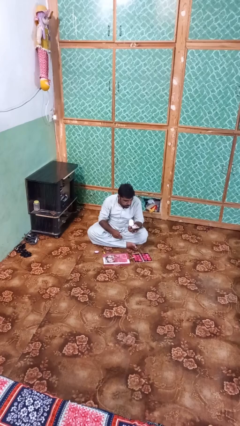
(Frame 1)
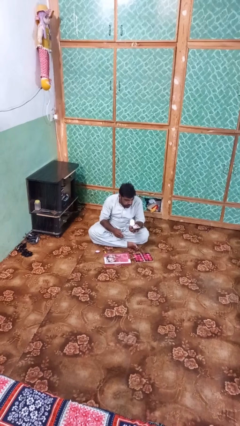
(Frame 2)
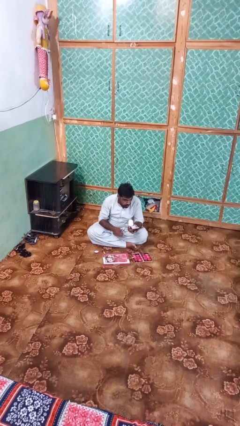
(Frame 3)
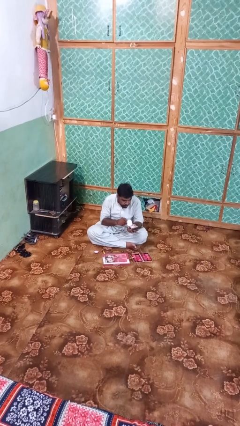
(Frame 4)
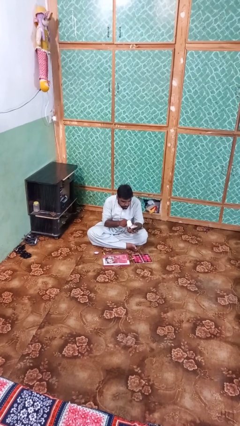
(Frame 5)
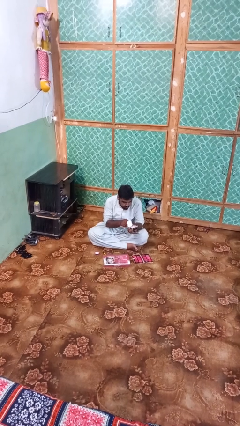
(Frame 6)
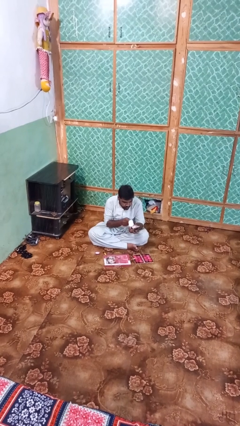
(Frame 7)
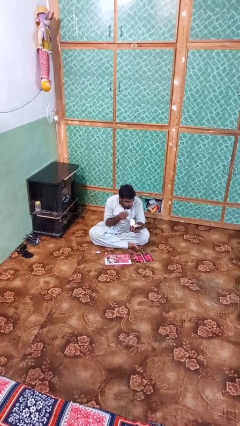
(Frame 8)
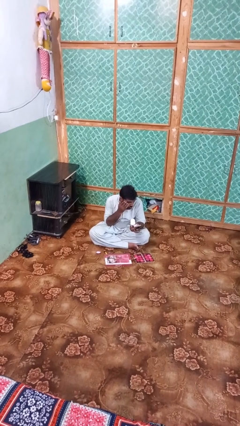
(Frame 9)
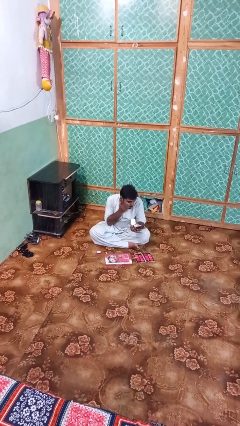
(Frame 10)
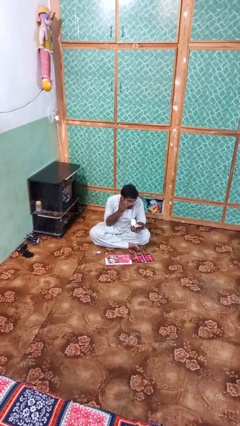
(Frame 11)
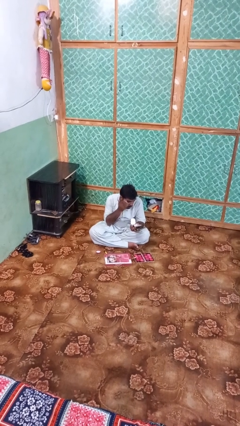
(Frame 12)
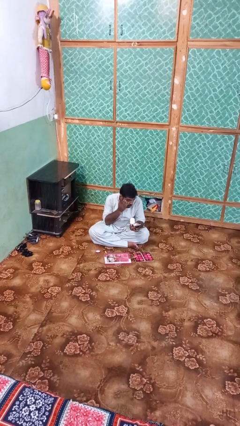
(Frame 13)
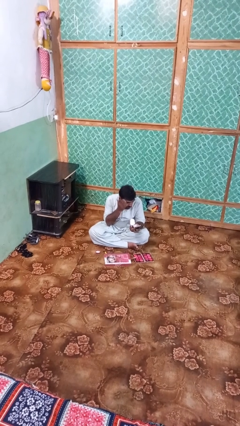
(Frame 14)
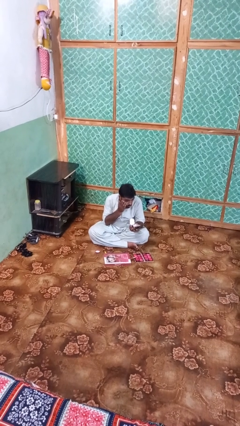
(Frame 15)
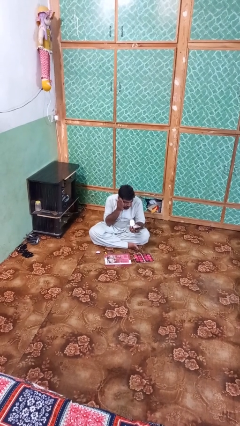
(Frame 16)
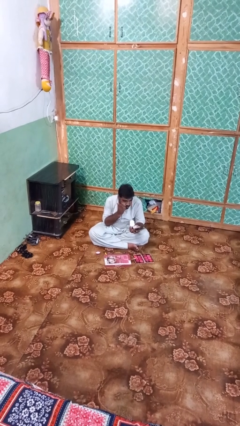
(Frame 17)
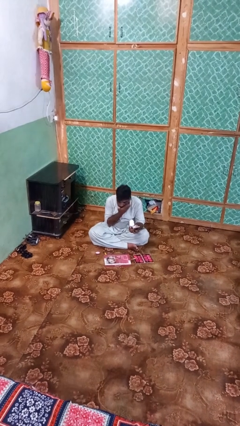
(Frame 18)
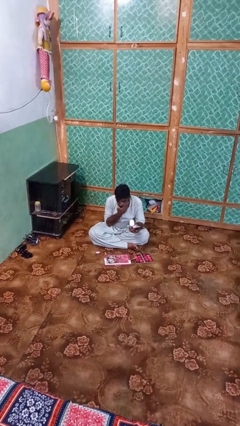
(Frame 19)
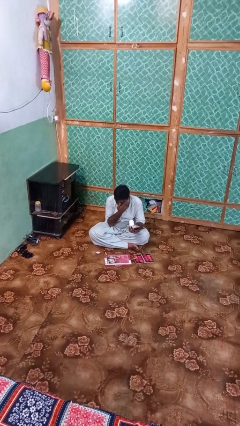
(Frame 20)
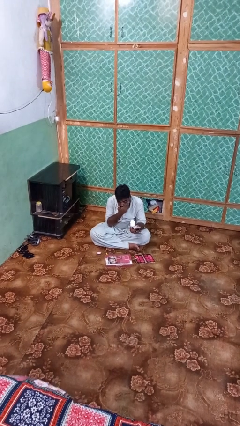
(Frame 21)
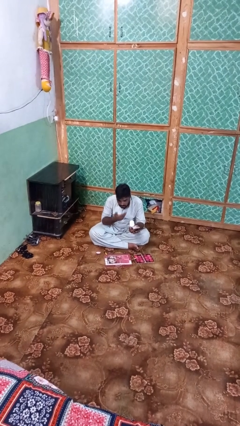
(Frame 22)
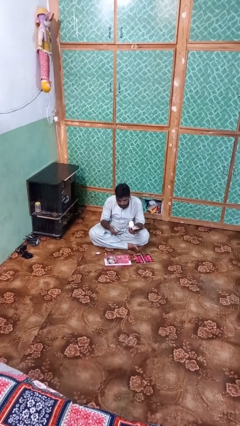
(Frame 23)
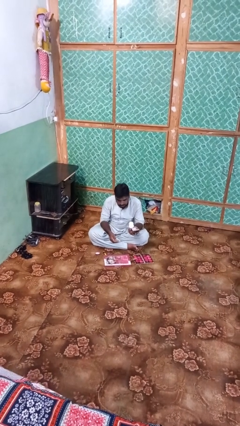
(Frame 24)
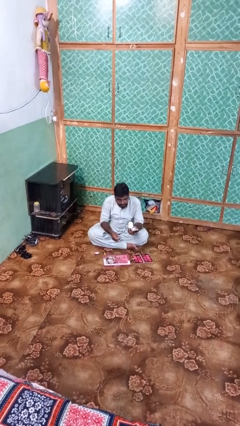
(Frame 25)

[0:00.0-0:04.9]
person applies foundation makeup

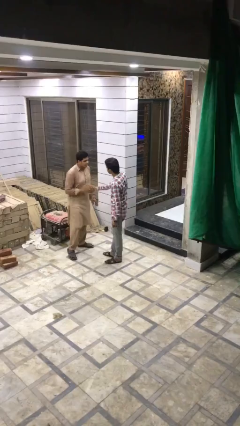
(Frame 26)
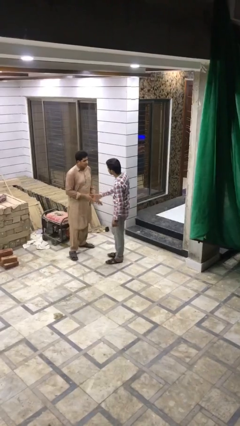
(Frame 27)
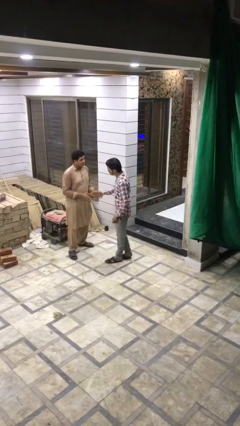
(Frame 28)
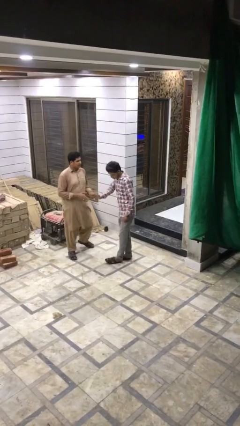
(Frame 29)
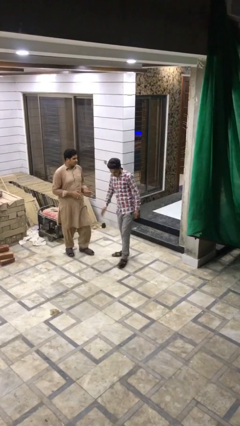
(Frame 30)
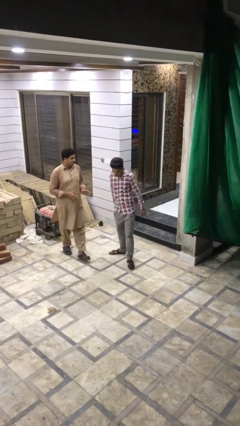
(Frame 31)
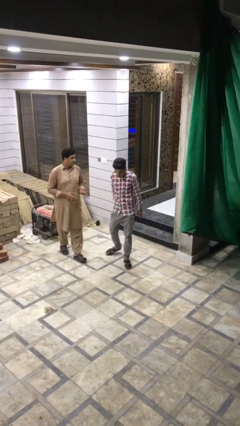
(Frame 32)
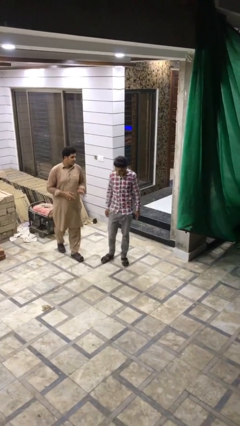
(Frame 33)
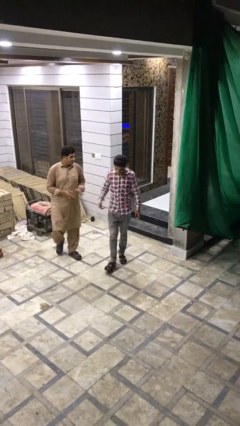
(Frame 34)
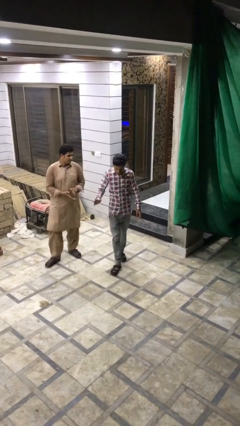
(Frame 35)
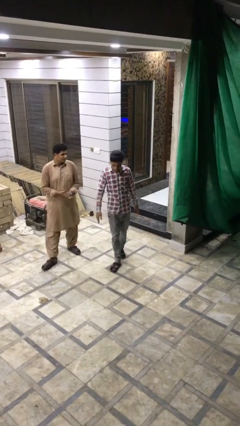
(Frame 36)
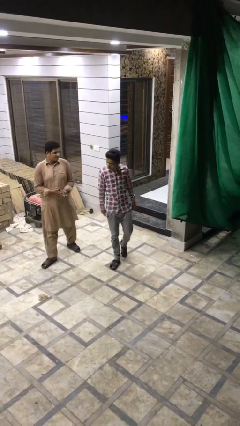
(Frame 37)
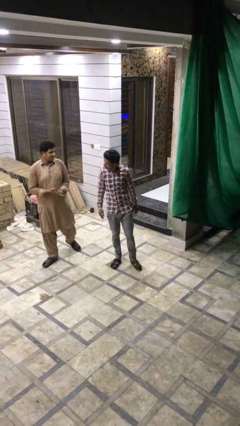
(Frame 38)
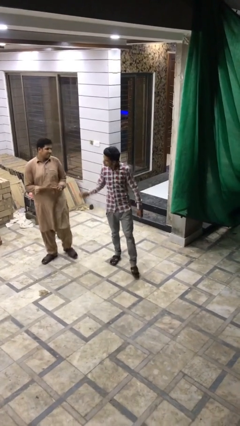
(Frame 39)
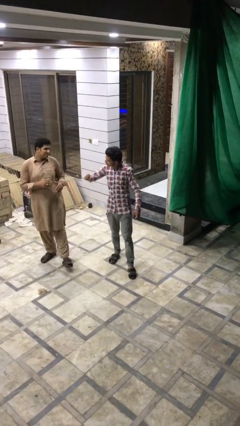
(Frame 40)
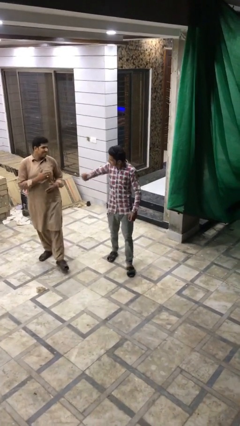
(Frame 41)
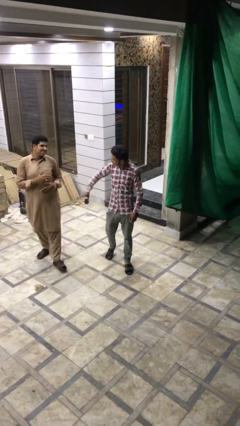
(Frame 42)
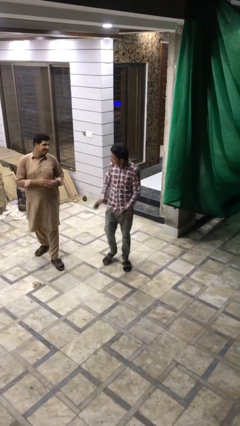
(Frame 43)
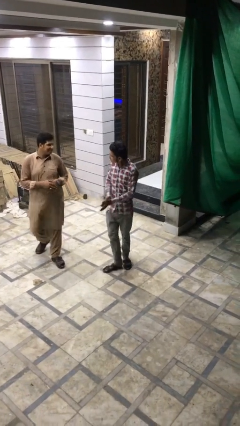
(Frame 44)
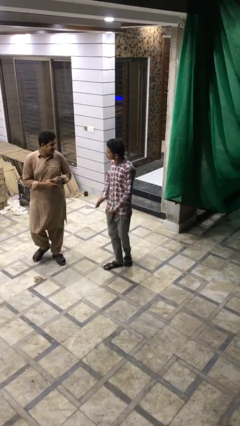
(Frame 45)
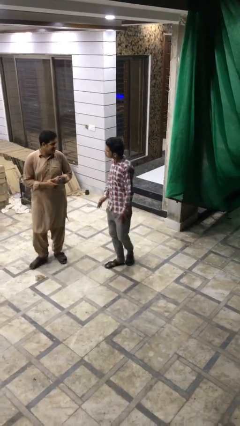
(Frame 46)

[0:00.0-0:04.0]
person talks to person

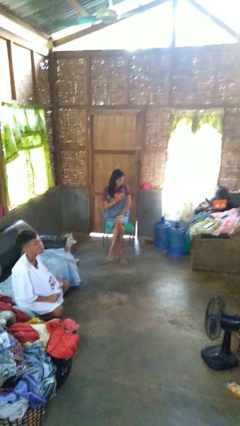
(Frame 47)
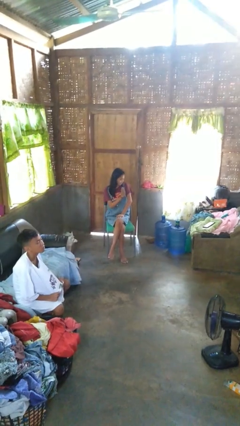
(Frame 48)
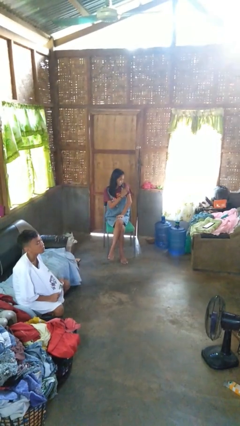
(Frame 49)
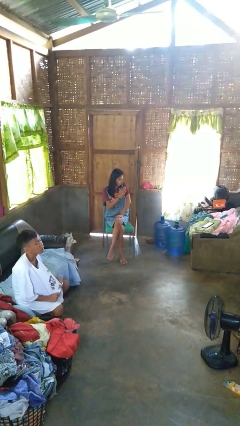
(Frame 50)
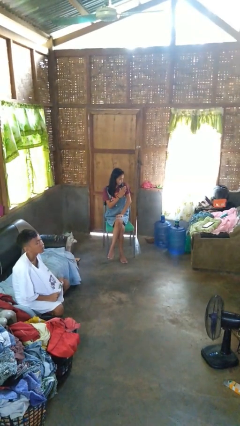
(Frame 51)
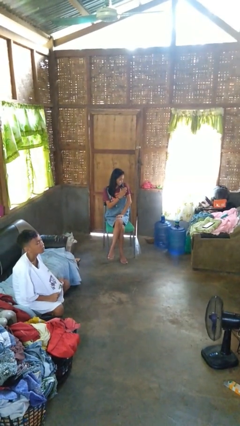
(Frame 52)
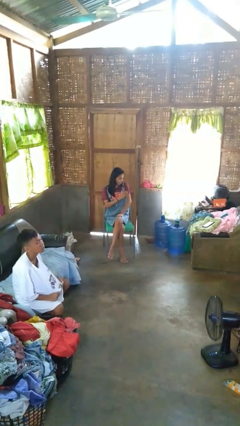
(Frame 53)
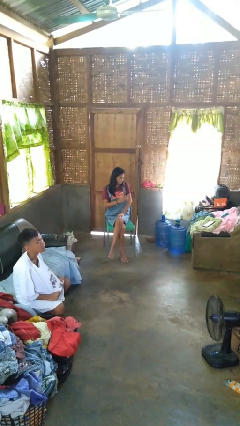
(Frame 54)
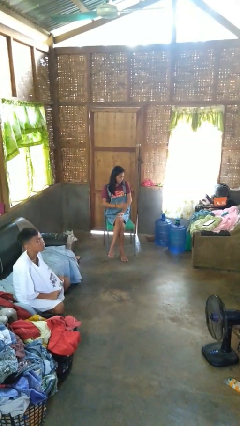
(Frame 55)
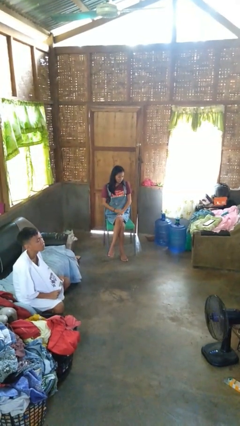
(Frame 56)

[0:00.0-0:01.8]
person swats bug

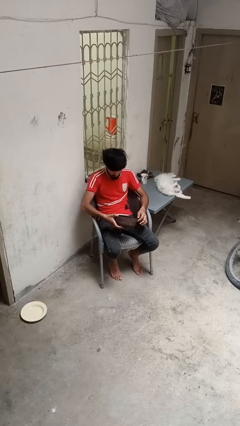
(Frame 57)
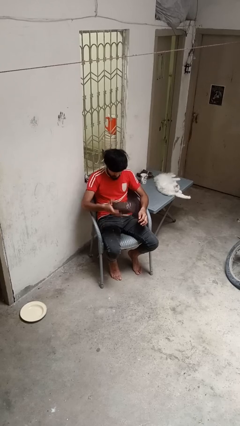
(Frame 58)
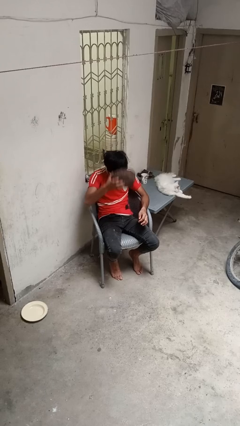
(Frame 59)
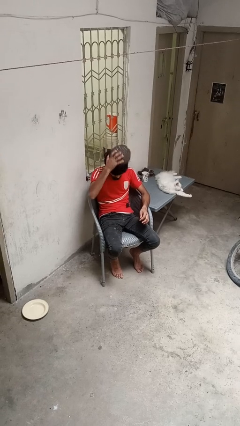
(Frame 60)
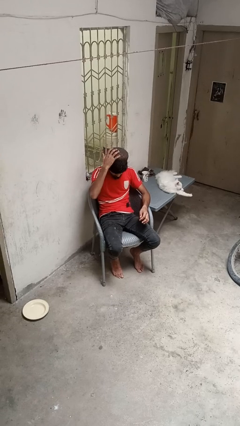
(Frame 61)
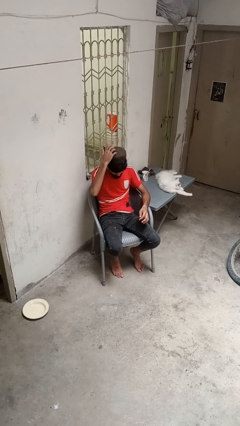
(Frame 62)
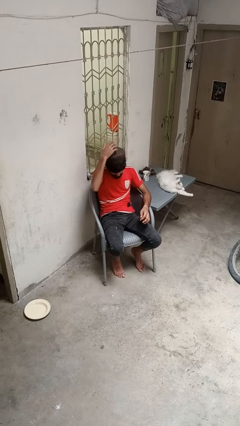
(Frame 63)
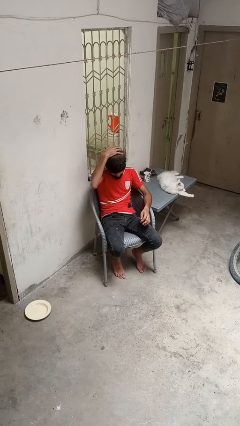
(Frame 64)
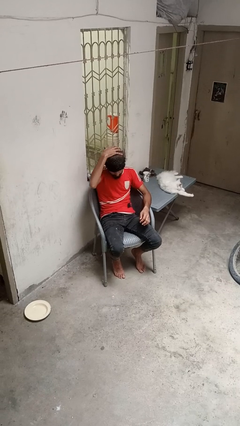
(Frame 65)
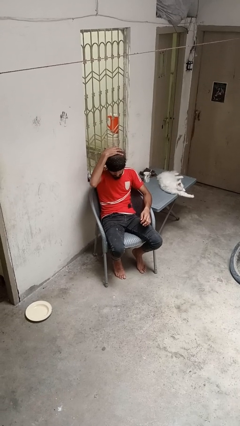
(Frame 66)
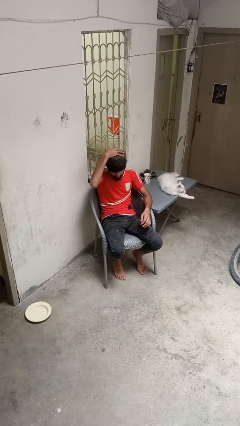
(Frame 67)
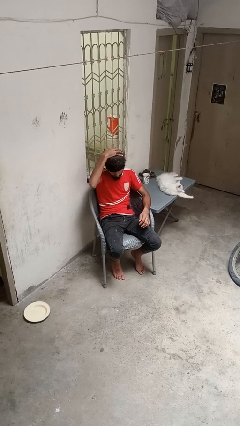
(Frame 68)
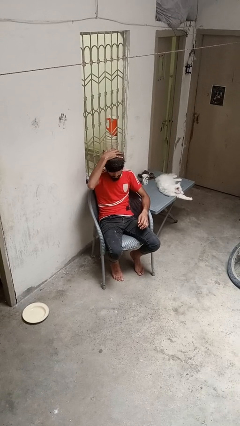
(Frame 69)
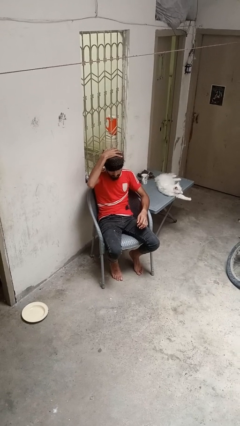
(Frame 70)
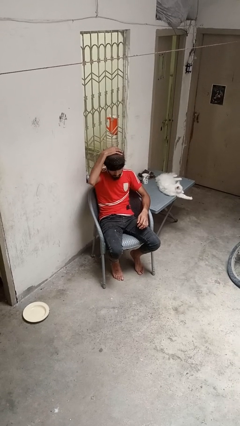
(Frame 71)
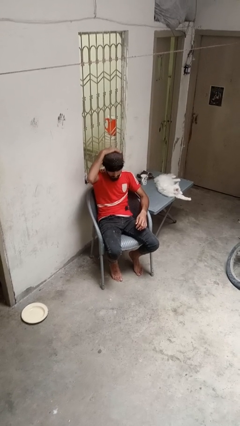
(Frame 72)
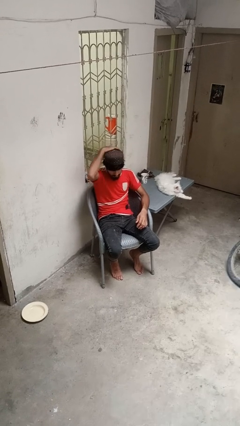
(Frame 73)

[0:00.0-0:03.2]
person puts on hat

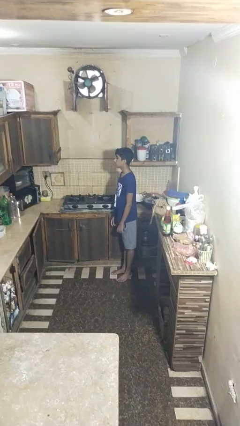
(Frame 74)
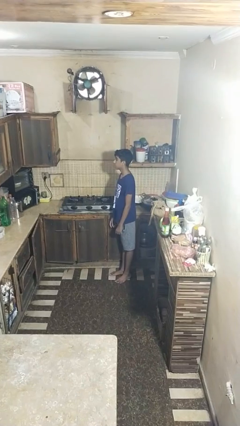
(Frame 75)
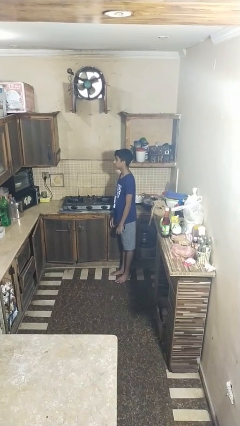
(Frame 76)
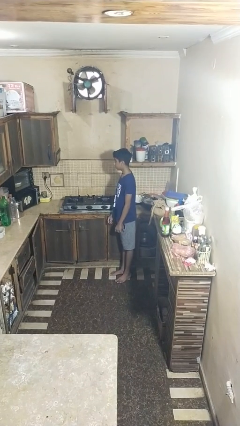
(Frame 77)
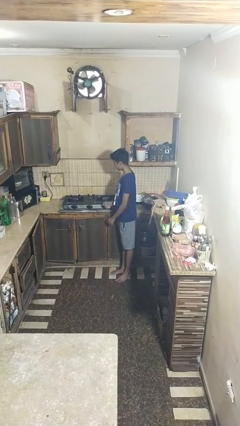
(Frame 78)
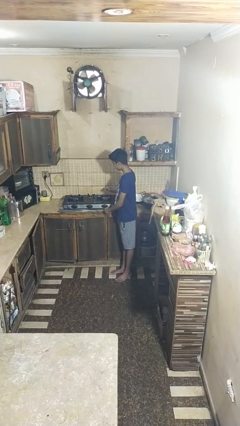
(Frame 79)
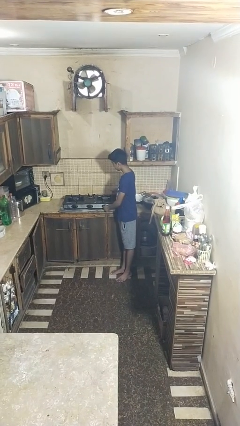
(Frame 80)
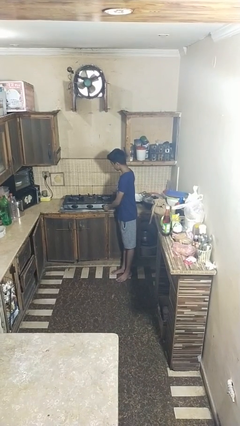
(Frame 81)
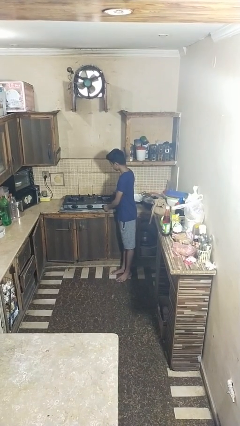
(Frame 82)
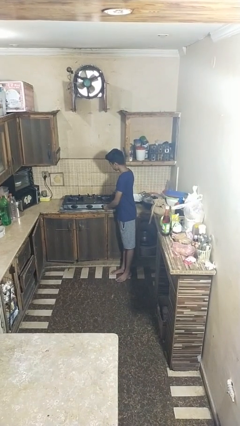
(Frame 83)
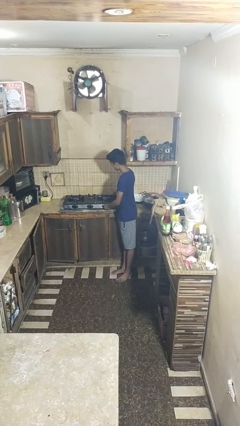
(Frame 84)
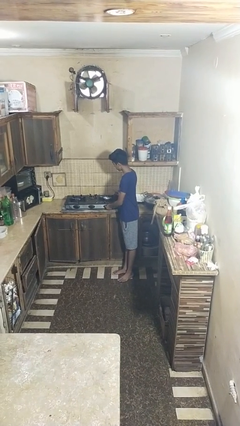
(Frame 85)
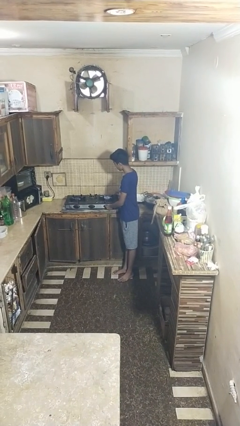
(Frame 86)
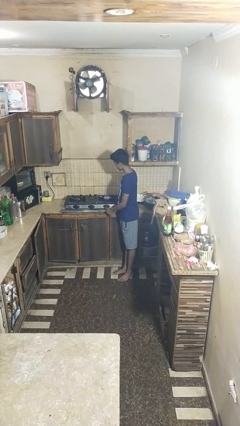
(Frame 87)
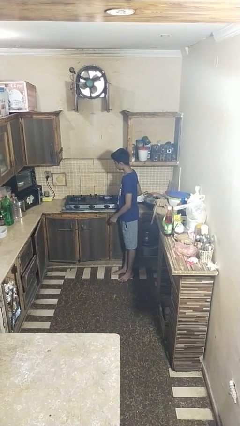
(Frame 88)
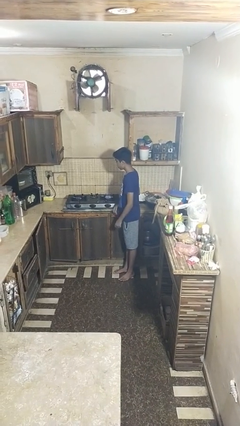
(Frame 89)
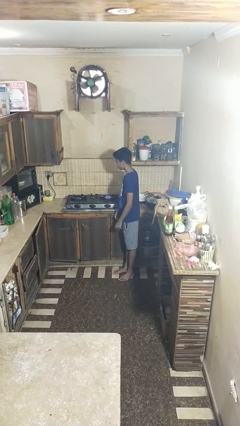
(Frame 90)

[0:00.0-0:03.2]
person turns on stovetop
